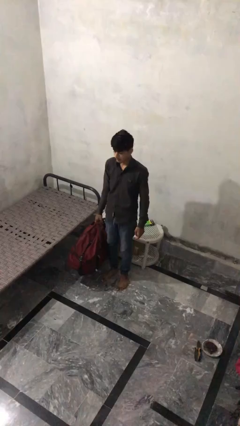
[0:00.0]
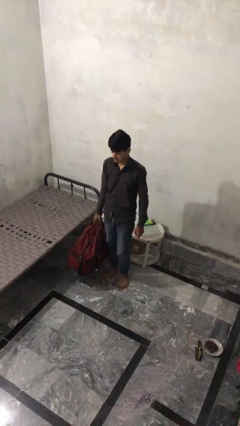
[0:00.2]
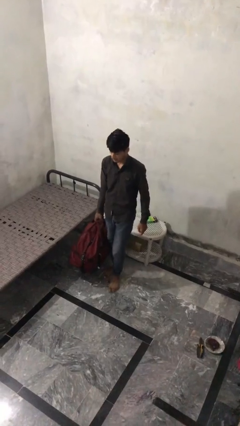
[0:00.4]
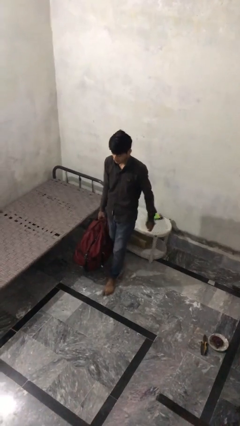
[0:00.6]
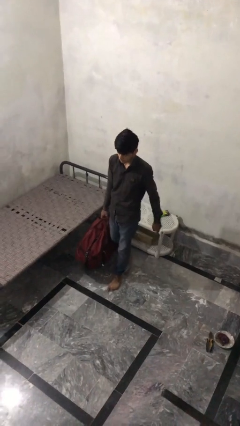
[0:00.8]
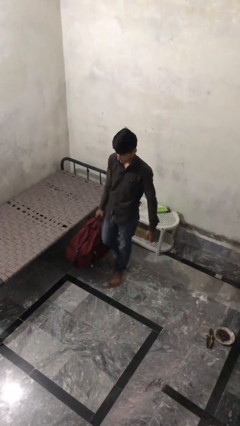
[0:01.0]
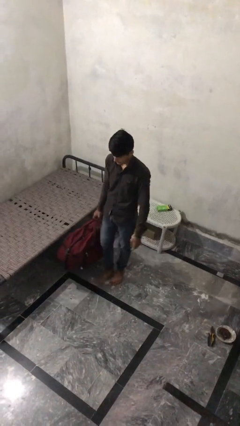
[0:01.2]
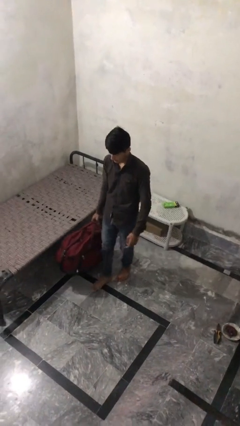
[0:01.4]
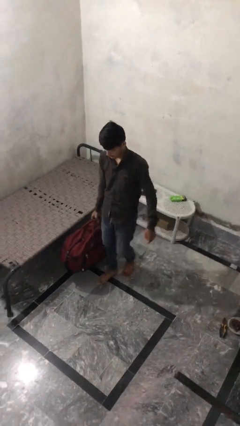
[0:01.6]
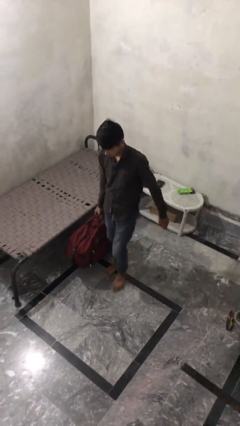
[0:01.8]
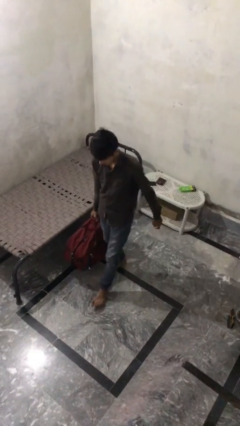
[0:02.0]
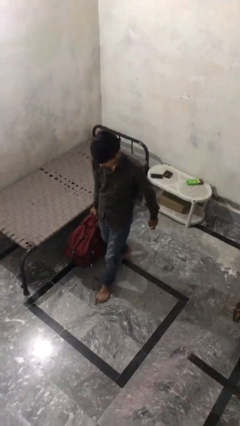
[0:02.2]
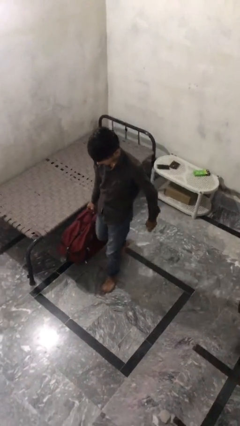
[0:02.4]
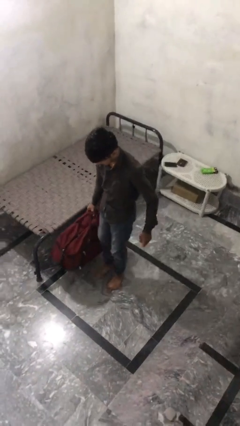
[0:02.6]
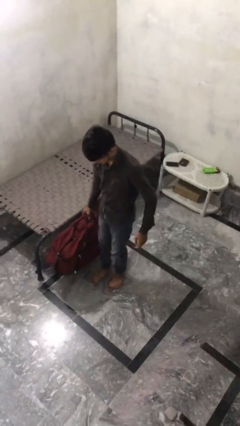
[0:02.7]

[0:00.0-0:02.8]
person carries heavy object

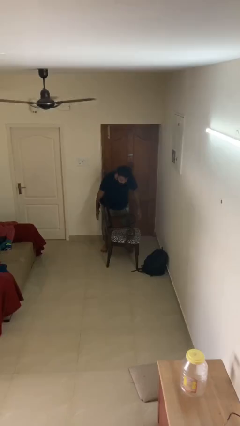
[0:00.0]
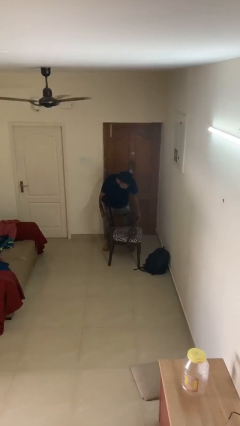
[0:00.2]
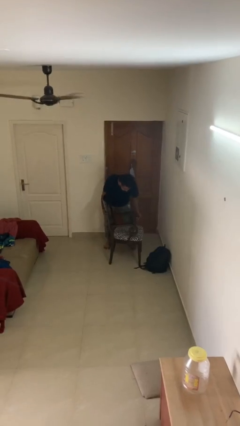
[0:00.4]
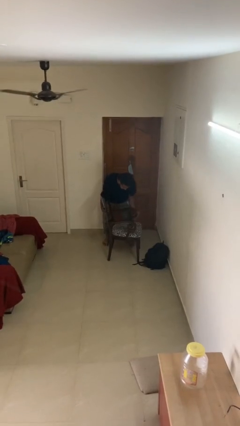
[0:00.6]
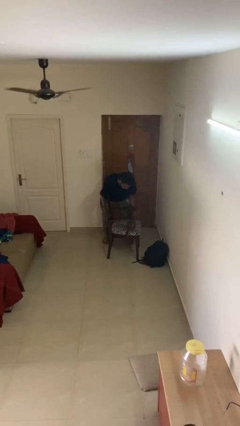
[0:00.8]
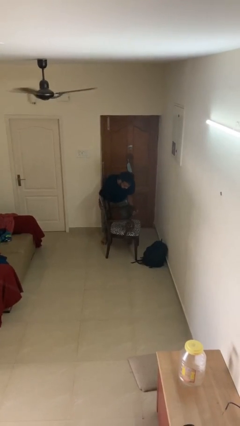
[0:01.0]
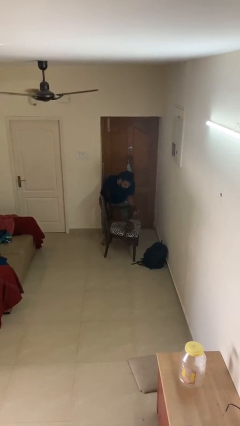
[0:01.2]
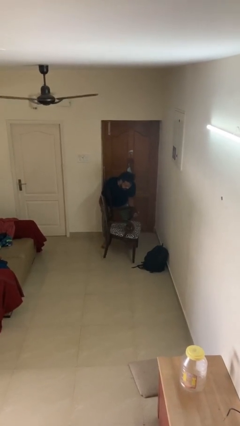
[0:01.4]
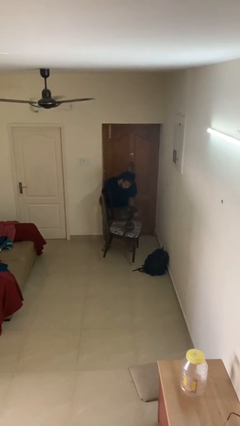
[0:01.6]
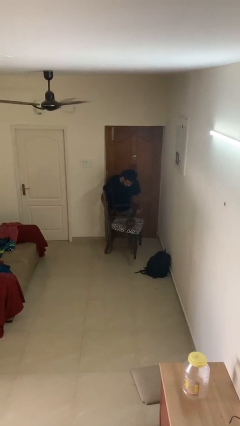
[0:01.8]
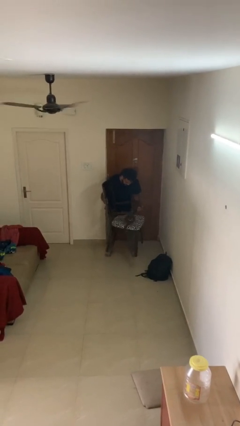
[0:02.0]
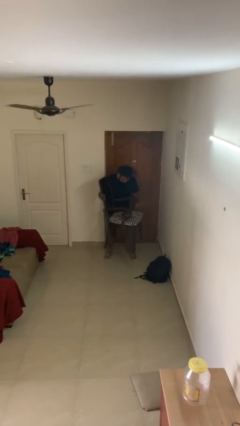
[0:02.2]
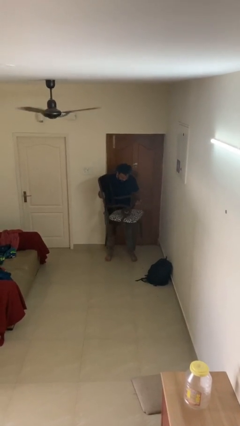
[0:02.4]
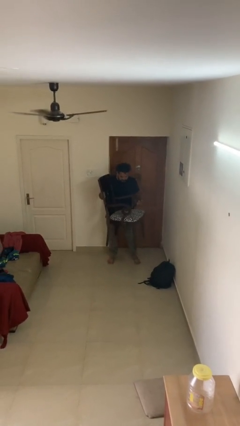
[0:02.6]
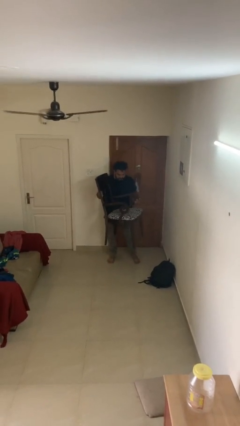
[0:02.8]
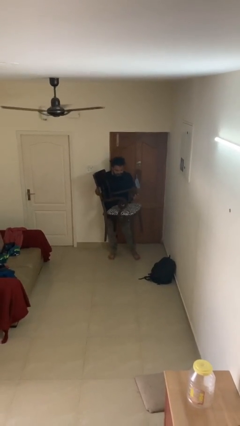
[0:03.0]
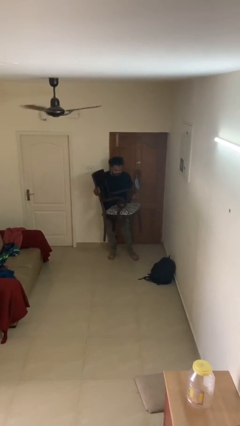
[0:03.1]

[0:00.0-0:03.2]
person picks up object from floor

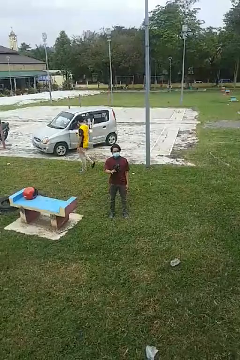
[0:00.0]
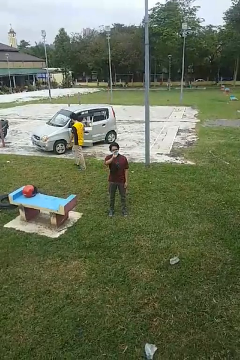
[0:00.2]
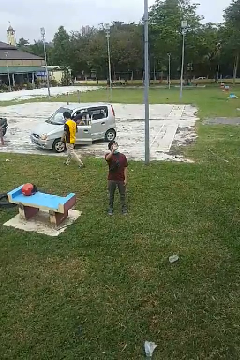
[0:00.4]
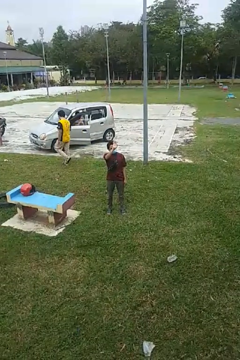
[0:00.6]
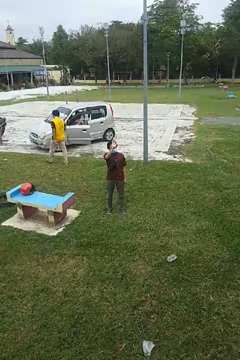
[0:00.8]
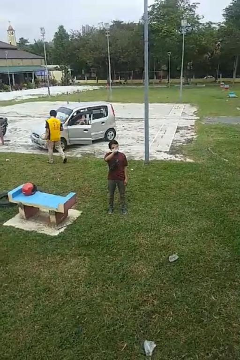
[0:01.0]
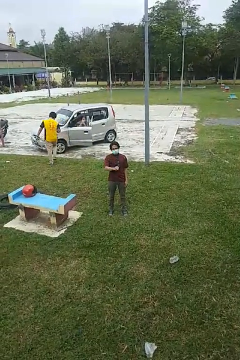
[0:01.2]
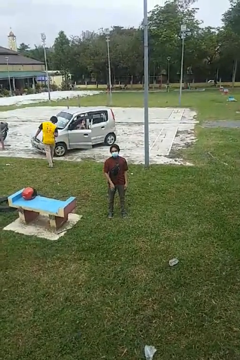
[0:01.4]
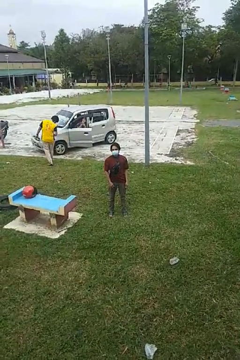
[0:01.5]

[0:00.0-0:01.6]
person waves at person

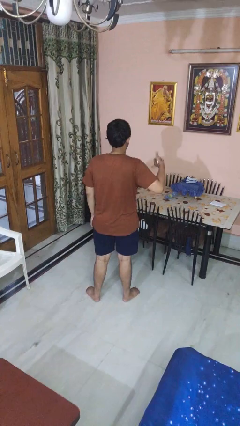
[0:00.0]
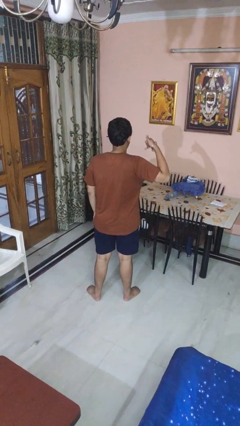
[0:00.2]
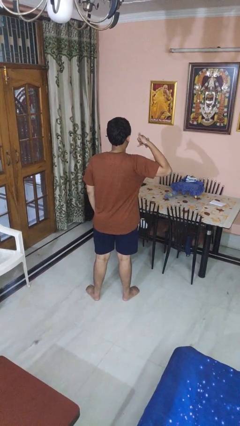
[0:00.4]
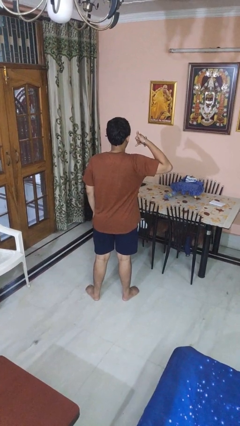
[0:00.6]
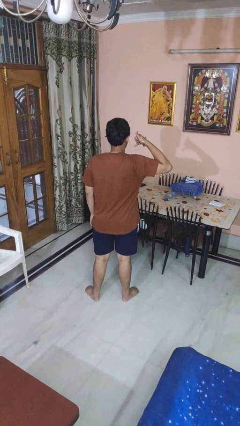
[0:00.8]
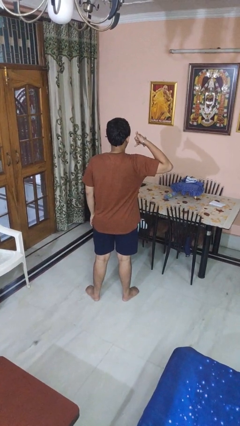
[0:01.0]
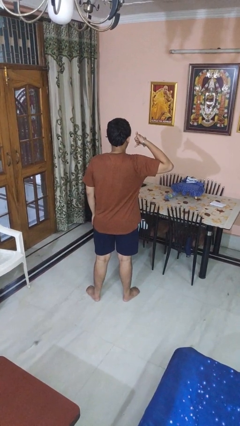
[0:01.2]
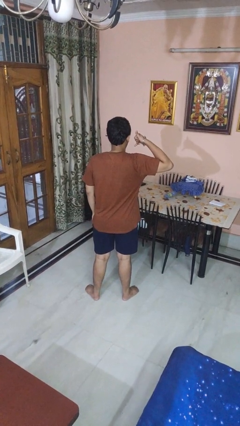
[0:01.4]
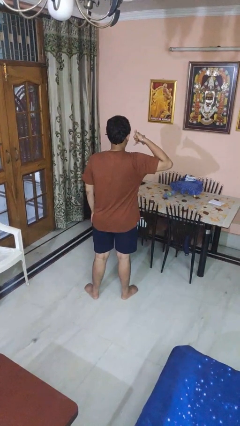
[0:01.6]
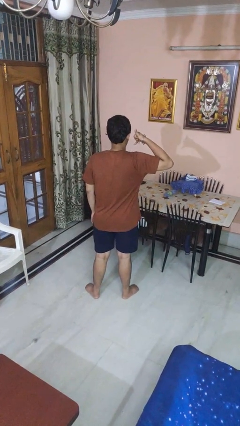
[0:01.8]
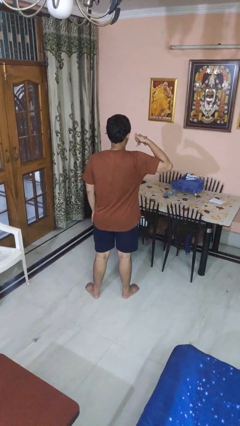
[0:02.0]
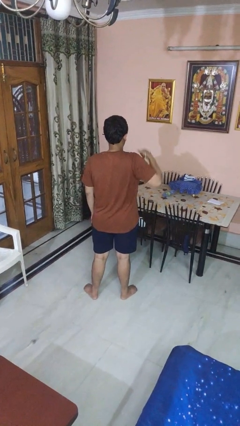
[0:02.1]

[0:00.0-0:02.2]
person gestures call me

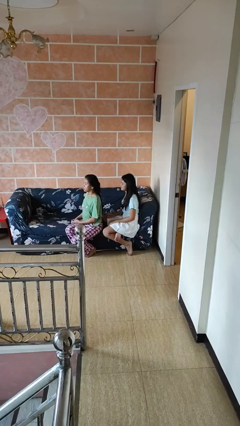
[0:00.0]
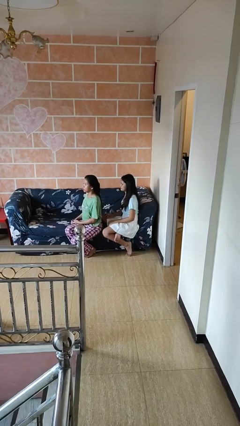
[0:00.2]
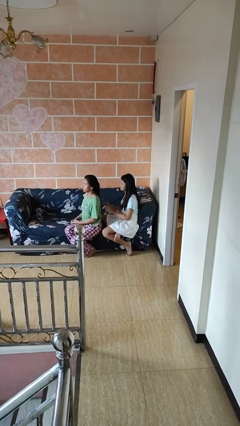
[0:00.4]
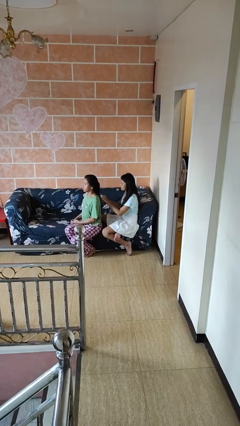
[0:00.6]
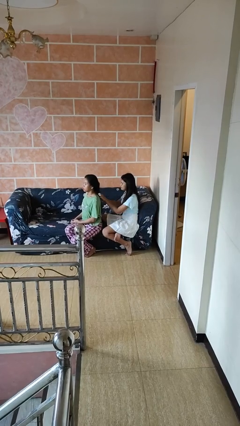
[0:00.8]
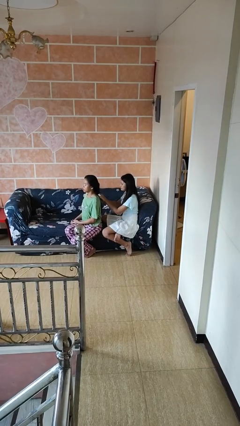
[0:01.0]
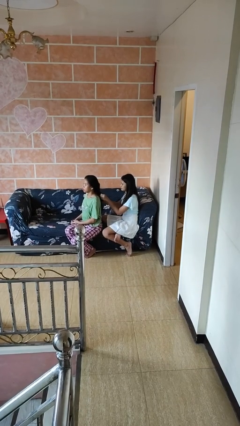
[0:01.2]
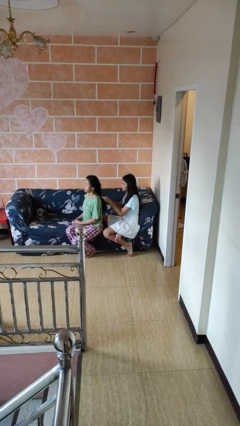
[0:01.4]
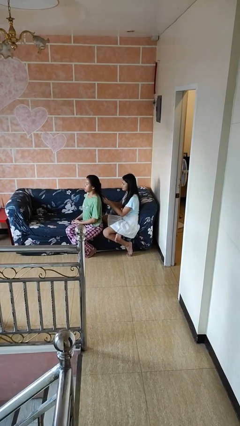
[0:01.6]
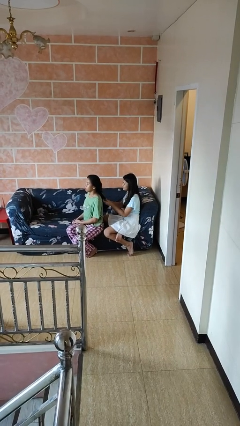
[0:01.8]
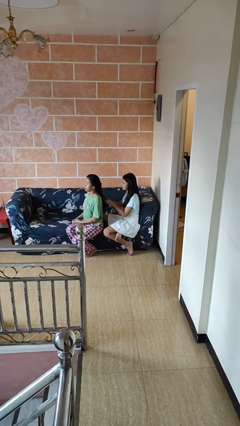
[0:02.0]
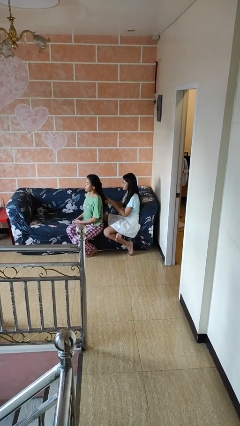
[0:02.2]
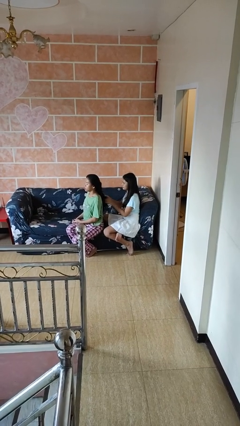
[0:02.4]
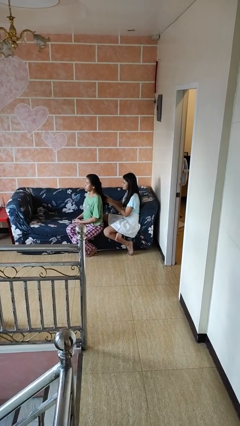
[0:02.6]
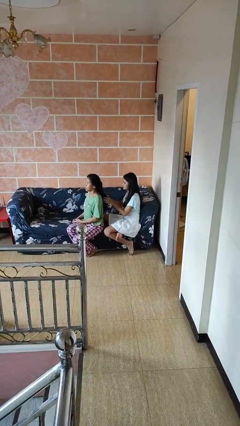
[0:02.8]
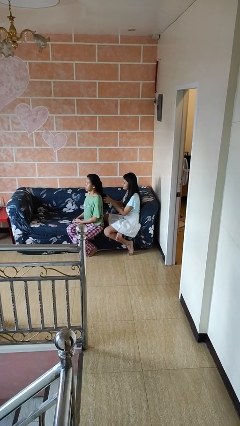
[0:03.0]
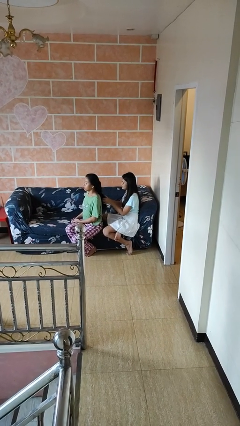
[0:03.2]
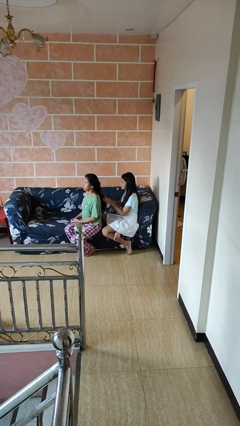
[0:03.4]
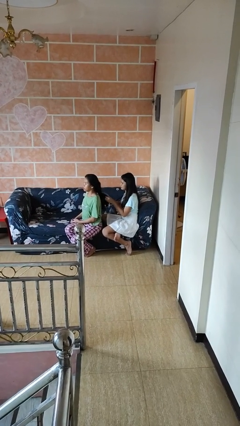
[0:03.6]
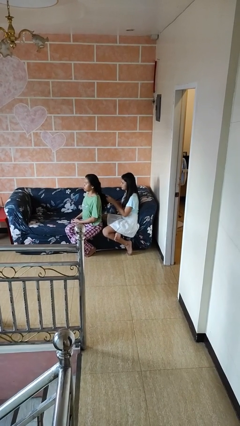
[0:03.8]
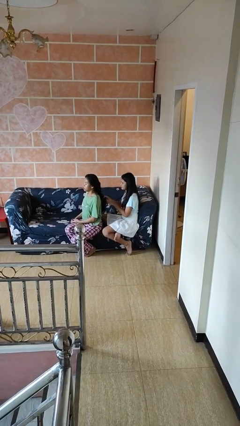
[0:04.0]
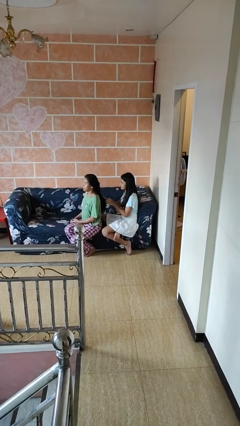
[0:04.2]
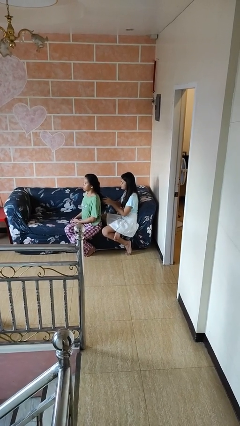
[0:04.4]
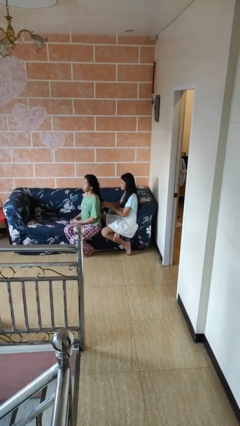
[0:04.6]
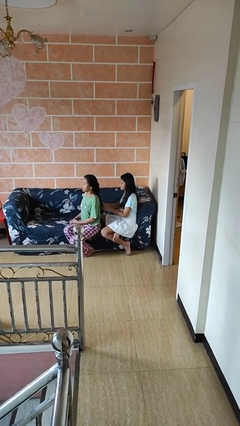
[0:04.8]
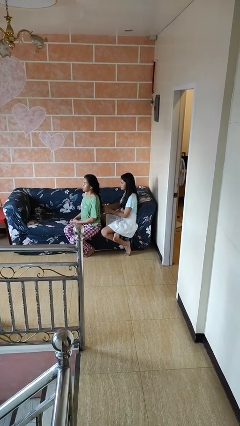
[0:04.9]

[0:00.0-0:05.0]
person braids hair of person

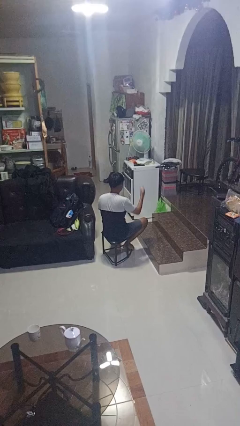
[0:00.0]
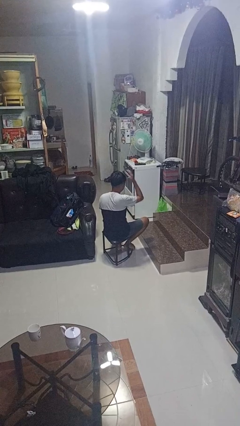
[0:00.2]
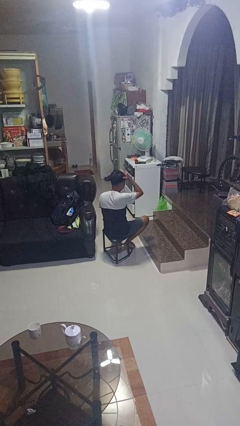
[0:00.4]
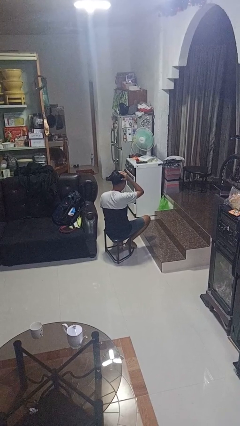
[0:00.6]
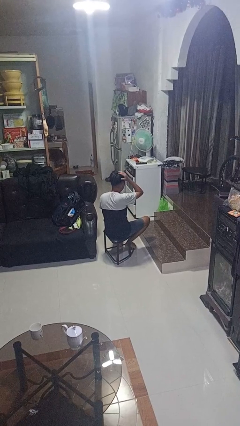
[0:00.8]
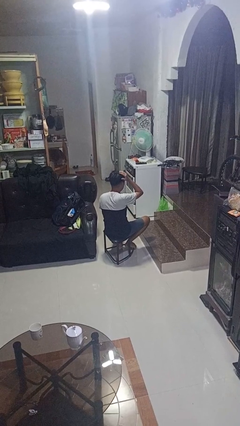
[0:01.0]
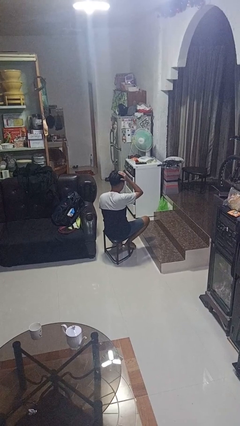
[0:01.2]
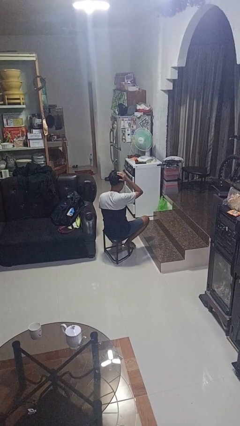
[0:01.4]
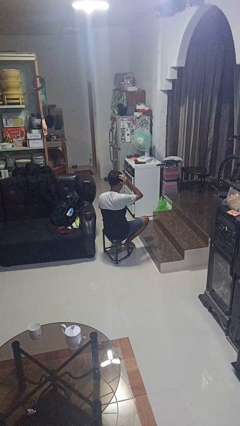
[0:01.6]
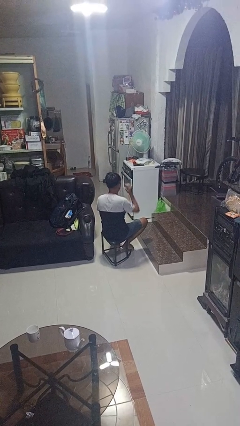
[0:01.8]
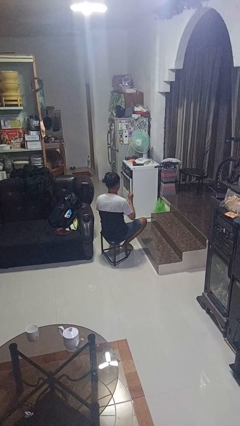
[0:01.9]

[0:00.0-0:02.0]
person pats head

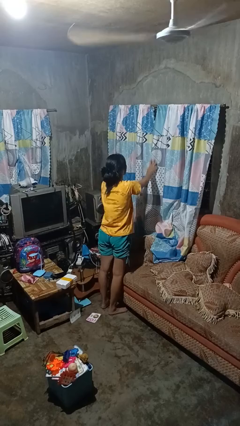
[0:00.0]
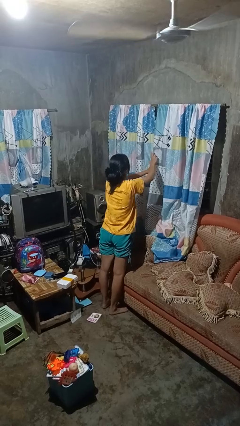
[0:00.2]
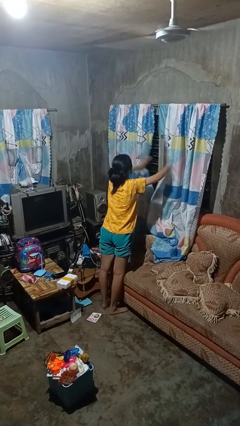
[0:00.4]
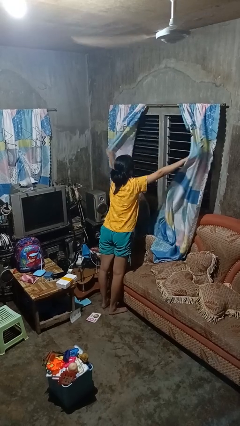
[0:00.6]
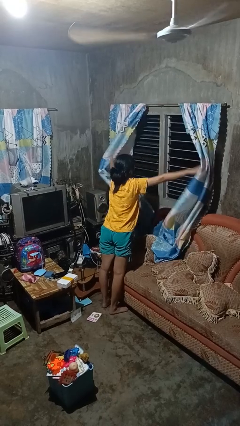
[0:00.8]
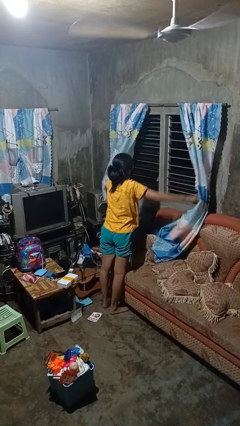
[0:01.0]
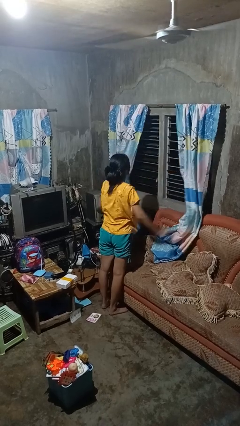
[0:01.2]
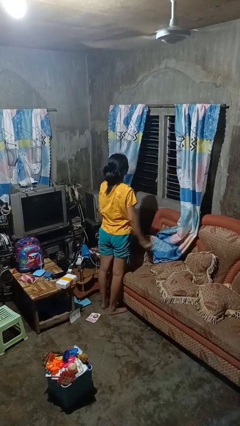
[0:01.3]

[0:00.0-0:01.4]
person opens curtains
